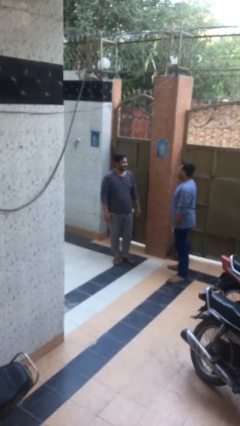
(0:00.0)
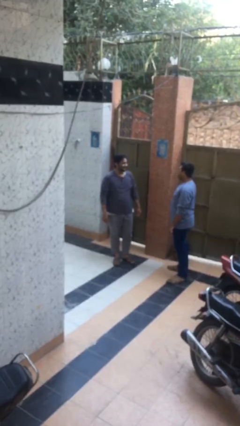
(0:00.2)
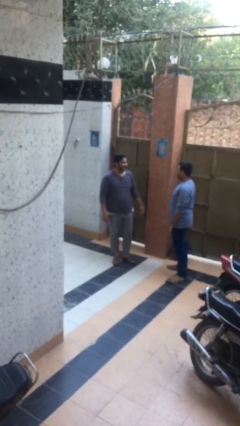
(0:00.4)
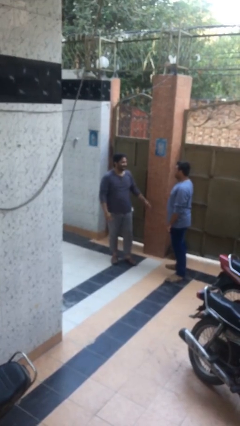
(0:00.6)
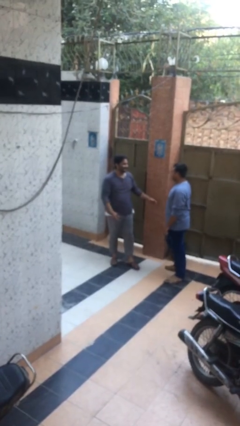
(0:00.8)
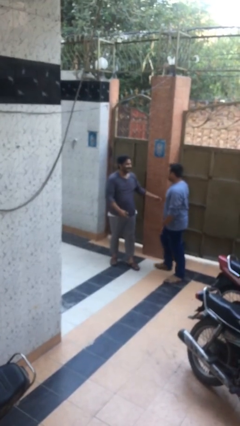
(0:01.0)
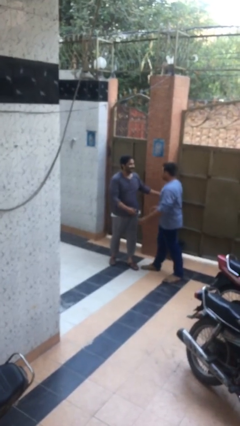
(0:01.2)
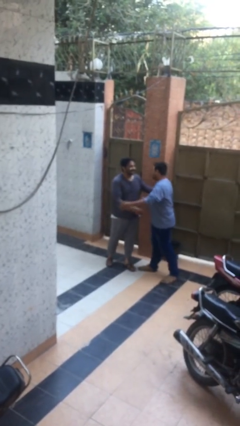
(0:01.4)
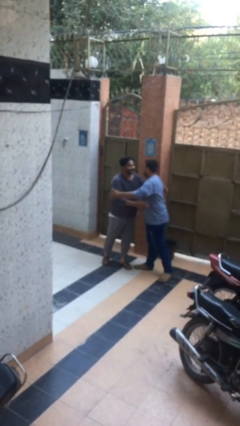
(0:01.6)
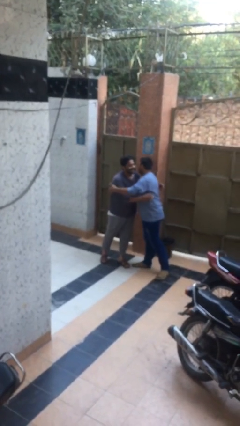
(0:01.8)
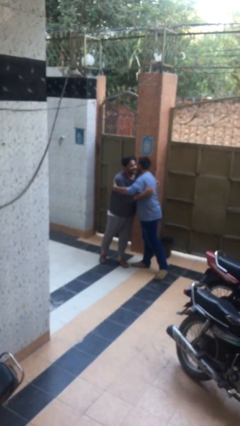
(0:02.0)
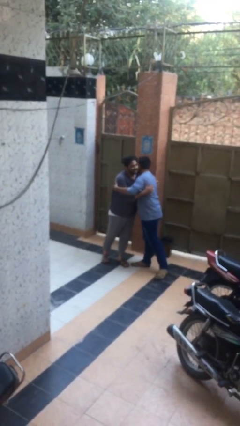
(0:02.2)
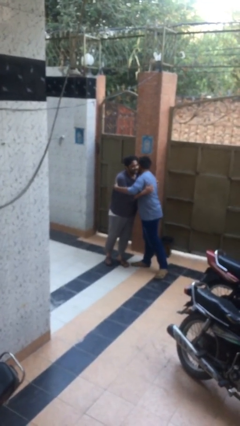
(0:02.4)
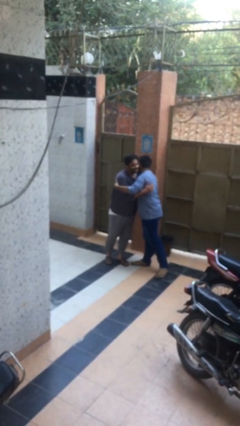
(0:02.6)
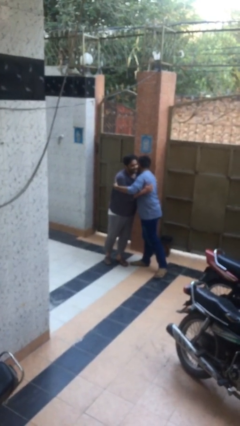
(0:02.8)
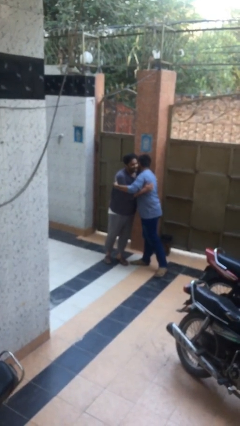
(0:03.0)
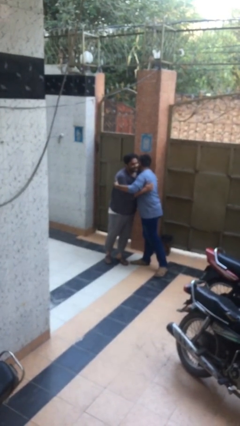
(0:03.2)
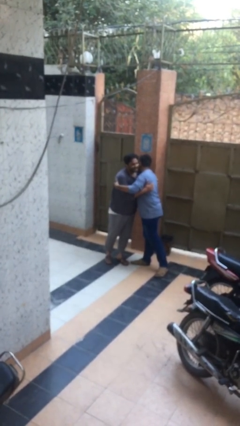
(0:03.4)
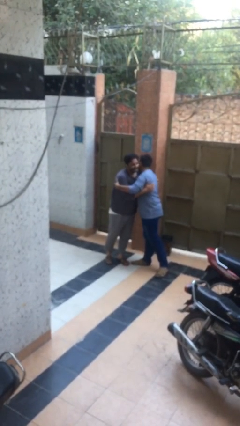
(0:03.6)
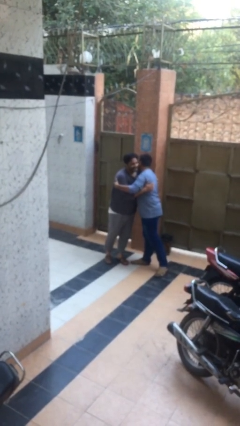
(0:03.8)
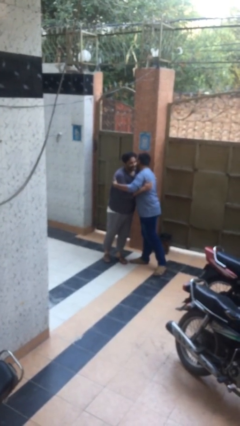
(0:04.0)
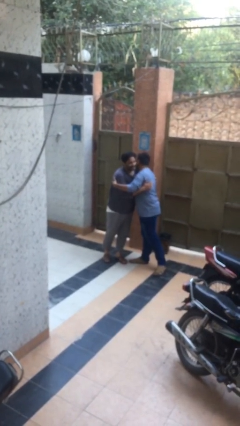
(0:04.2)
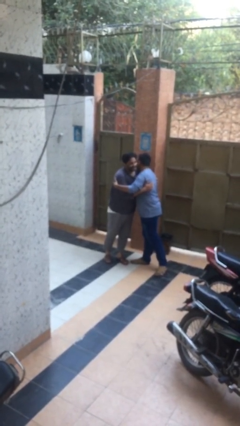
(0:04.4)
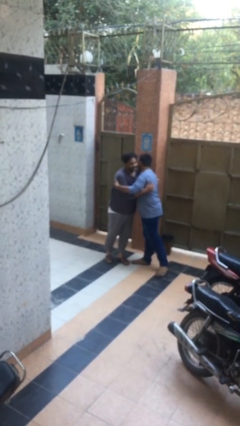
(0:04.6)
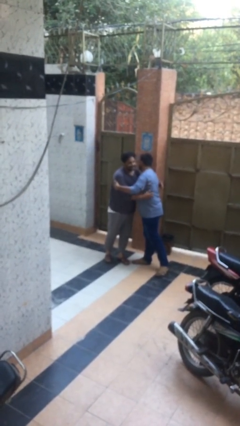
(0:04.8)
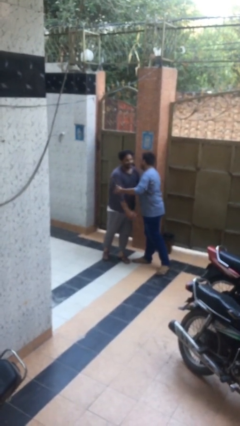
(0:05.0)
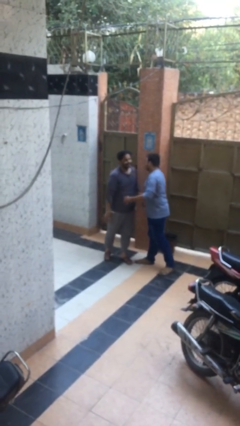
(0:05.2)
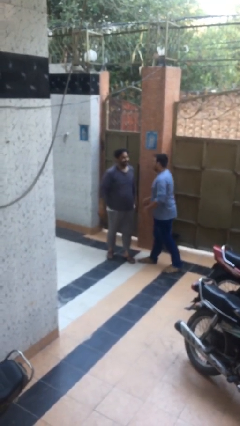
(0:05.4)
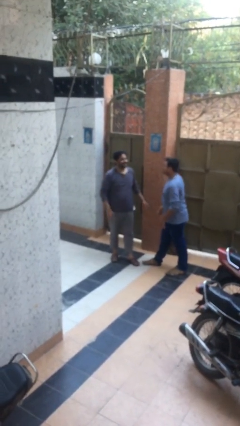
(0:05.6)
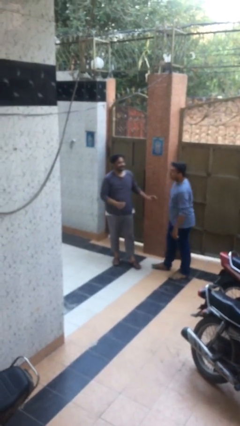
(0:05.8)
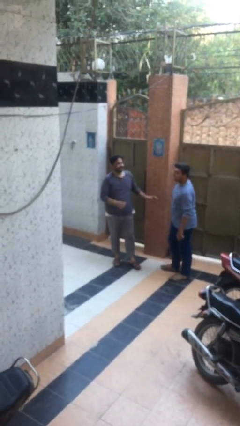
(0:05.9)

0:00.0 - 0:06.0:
person embraces person

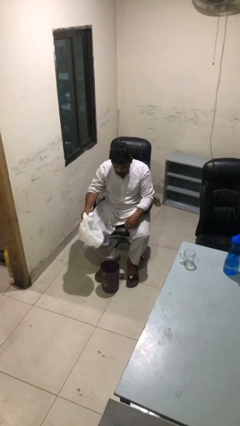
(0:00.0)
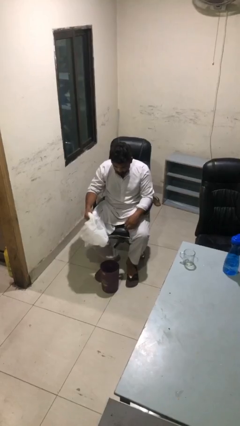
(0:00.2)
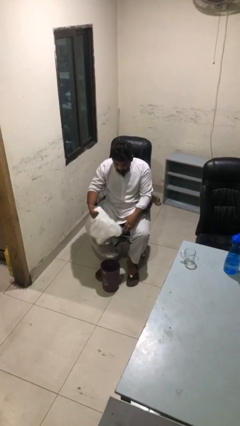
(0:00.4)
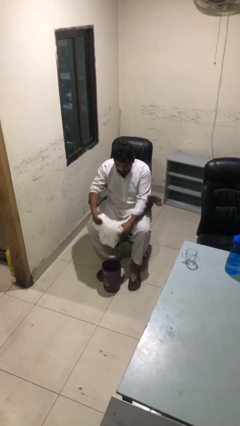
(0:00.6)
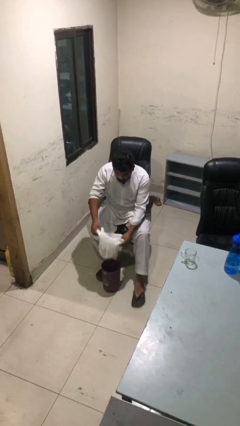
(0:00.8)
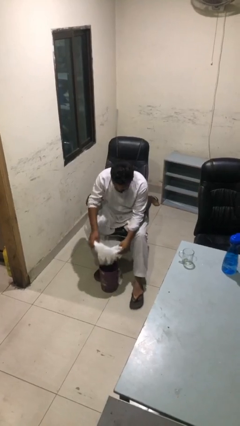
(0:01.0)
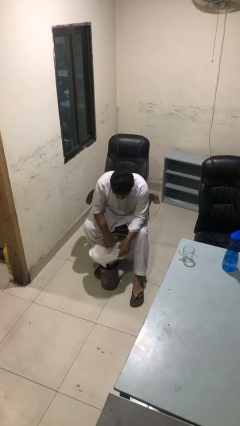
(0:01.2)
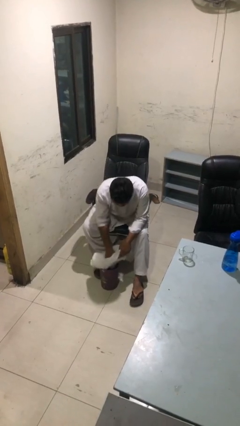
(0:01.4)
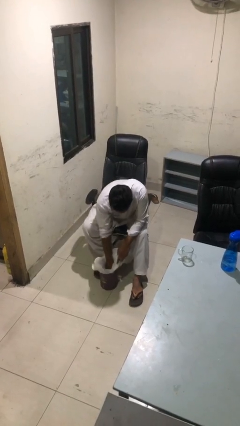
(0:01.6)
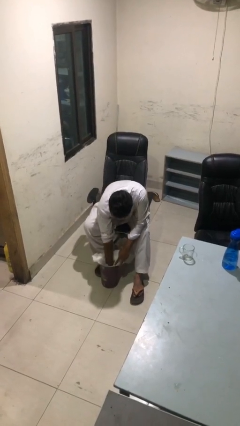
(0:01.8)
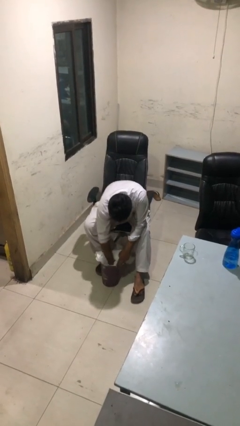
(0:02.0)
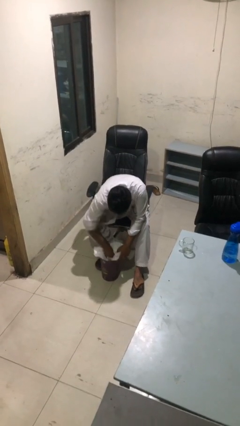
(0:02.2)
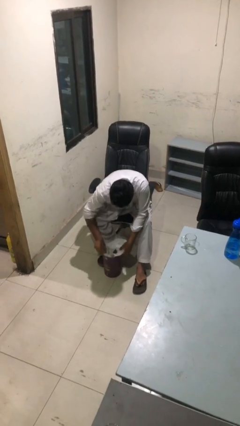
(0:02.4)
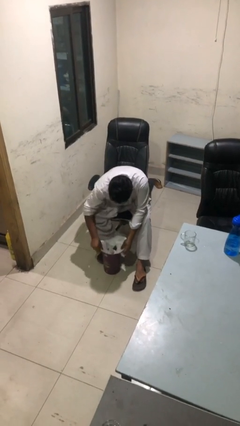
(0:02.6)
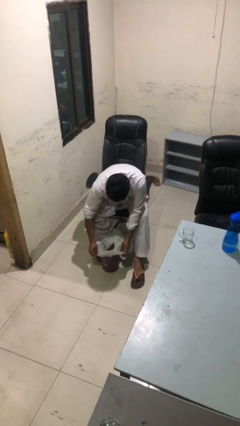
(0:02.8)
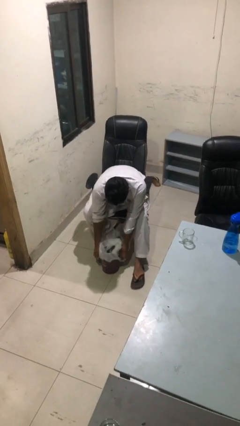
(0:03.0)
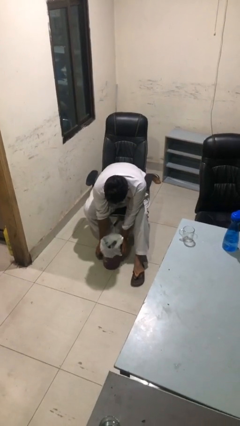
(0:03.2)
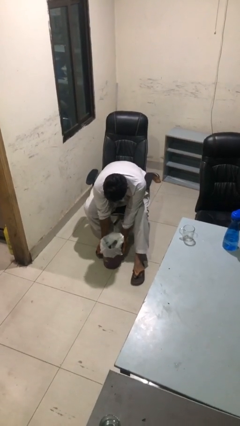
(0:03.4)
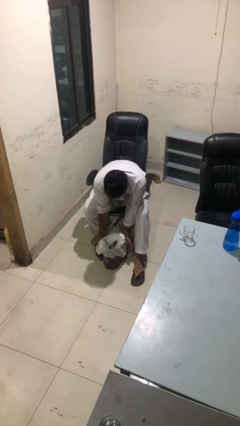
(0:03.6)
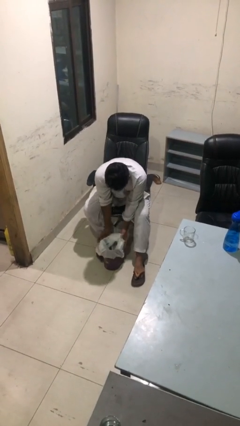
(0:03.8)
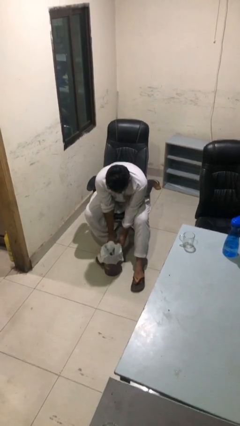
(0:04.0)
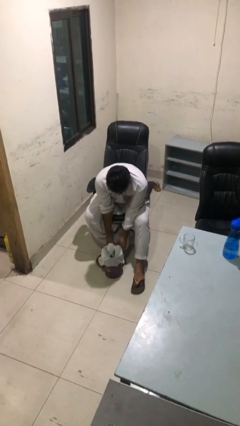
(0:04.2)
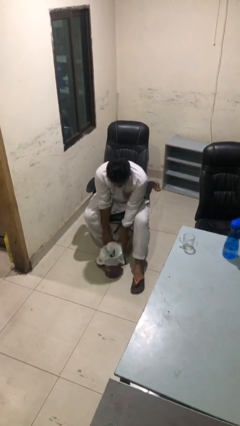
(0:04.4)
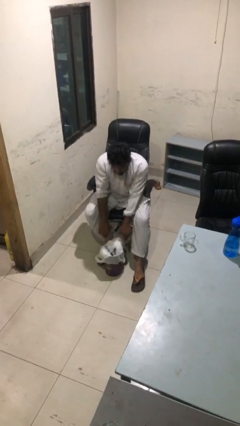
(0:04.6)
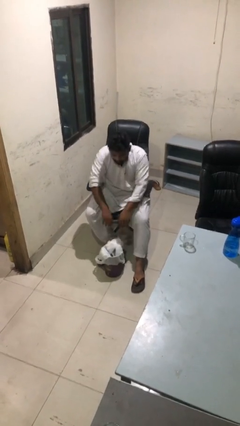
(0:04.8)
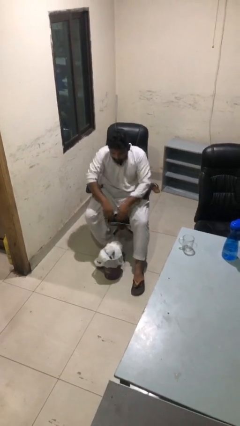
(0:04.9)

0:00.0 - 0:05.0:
person inserts trashbag into trashcan

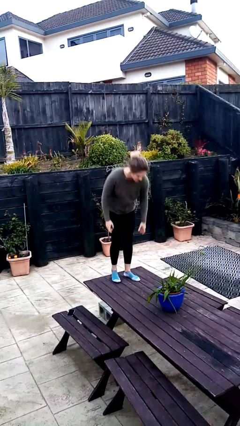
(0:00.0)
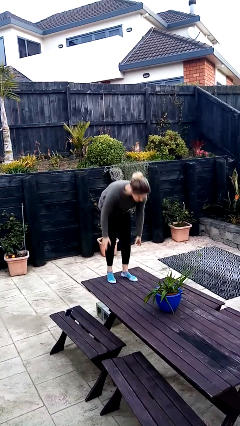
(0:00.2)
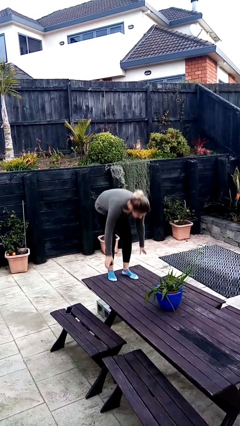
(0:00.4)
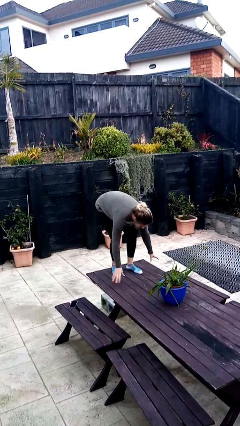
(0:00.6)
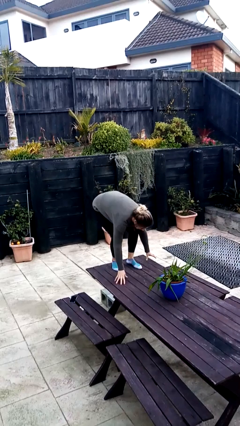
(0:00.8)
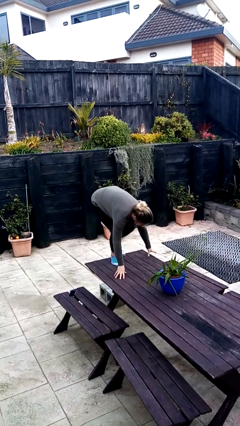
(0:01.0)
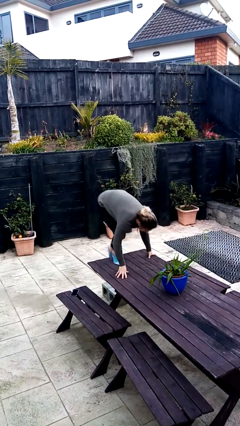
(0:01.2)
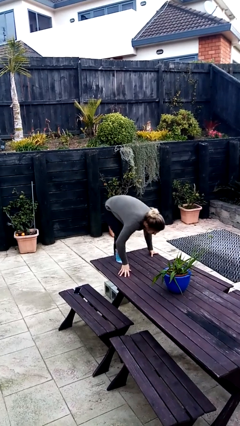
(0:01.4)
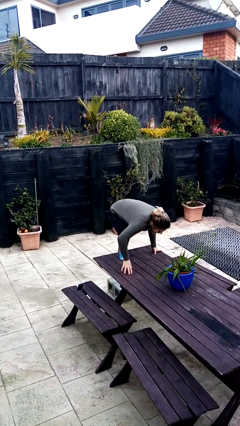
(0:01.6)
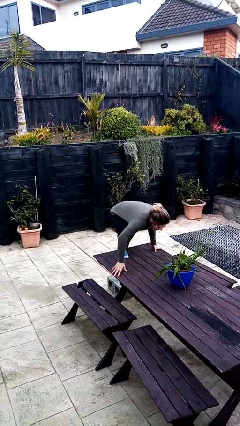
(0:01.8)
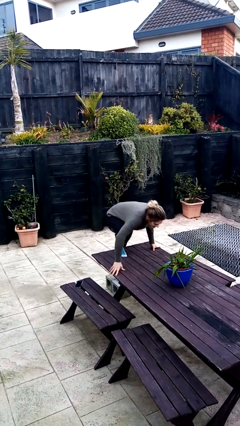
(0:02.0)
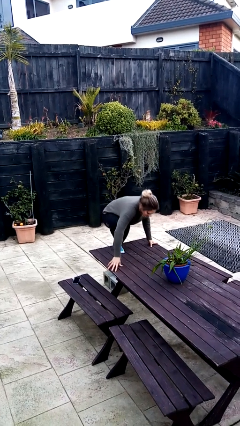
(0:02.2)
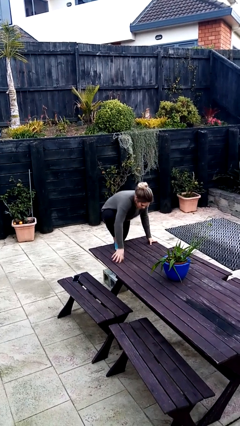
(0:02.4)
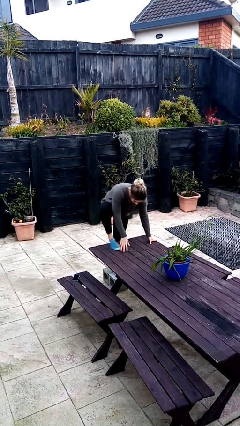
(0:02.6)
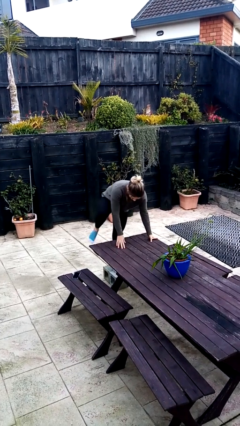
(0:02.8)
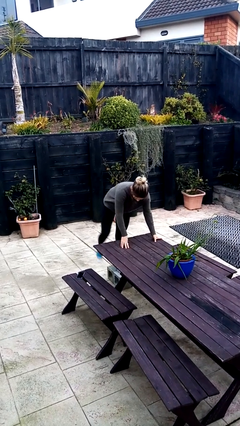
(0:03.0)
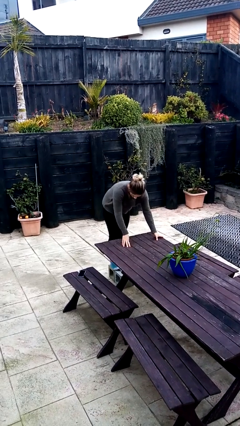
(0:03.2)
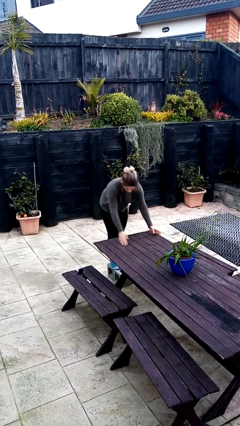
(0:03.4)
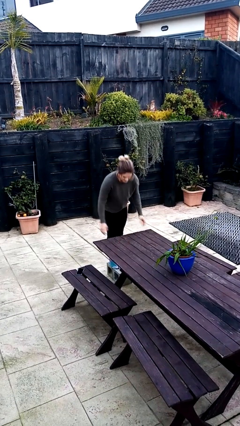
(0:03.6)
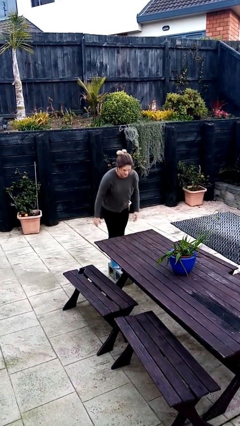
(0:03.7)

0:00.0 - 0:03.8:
person climbs off table

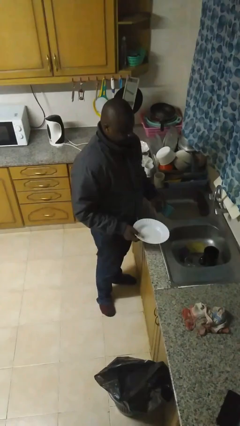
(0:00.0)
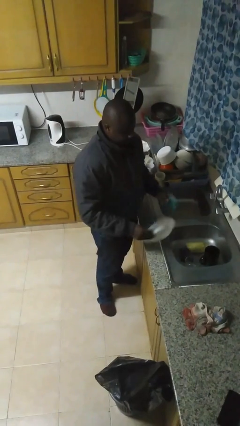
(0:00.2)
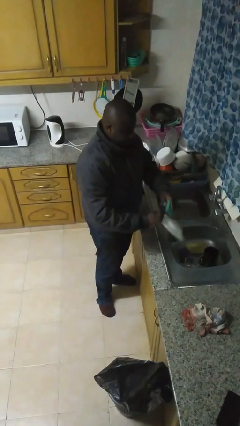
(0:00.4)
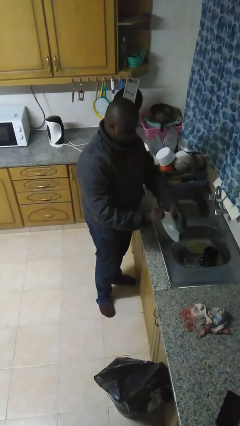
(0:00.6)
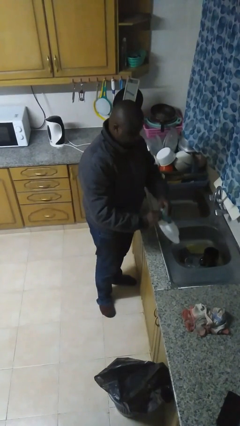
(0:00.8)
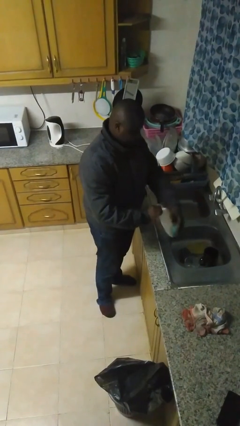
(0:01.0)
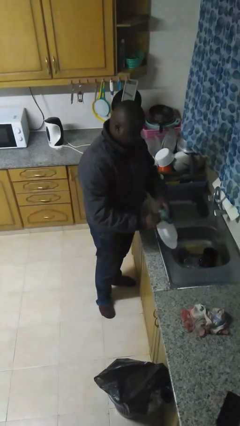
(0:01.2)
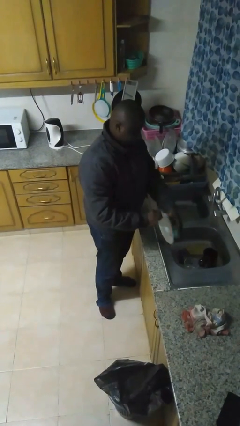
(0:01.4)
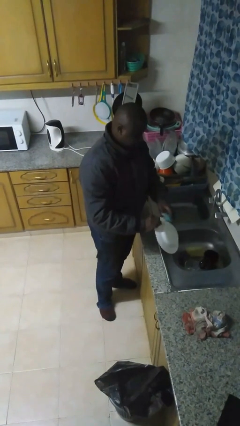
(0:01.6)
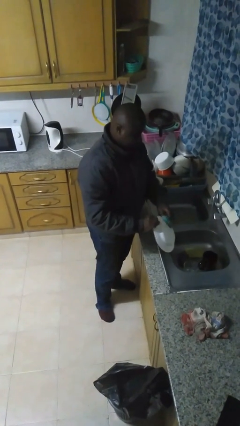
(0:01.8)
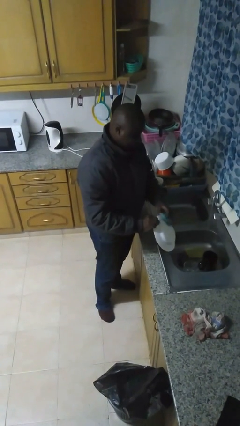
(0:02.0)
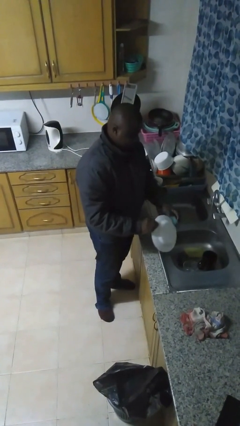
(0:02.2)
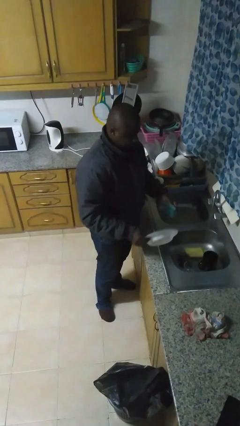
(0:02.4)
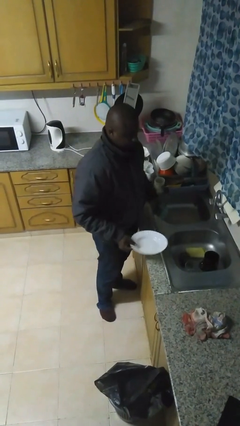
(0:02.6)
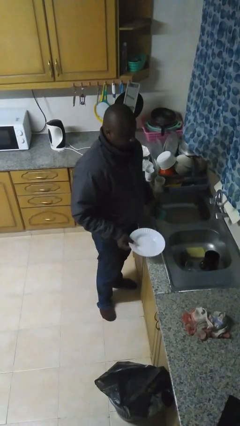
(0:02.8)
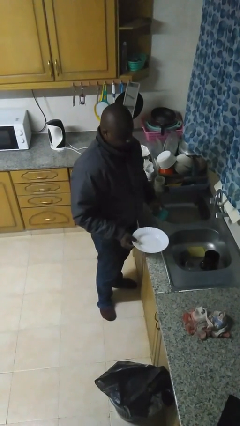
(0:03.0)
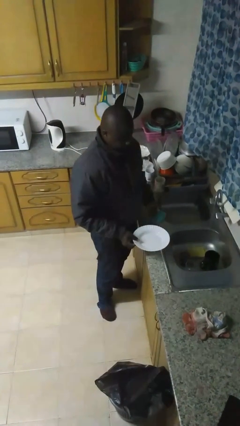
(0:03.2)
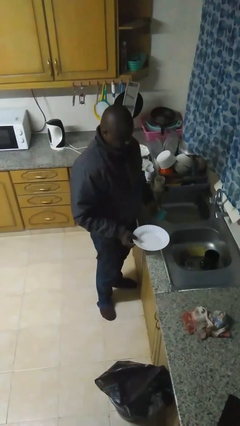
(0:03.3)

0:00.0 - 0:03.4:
person washes dish
